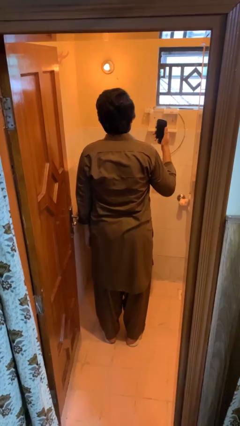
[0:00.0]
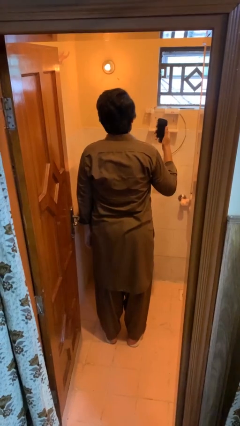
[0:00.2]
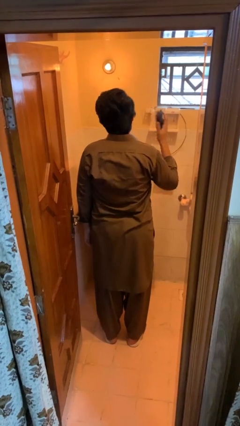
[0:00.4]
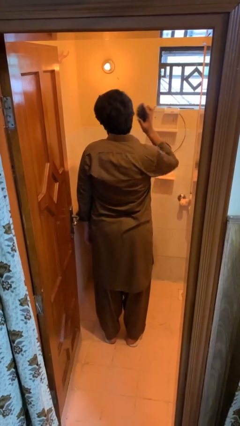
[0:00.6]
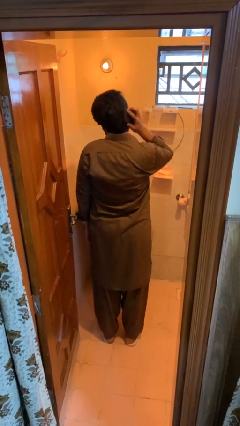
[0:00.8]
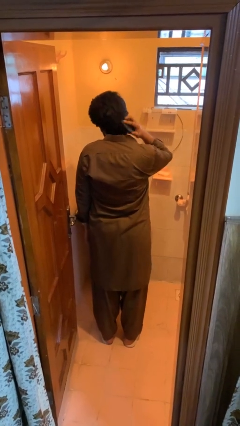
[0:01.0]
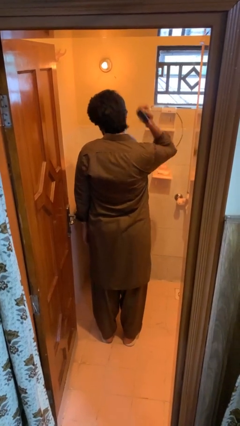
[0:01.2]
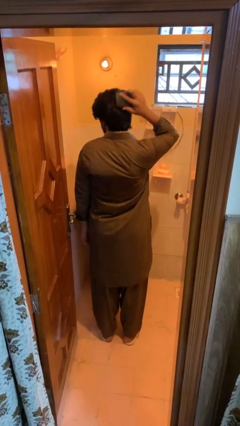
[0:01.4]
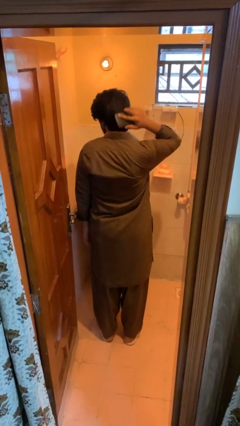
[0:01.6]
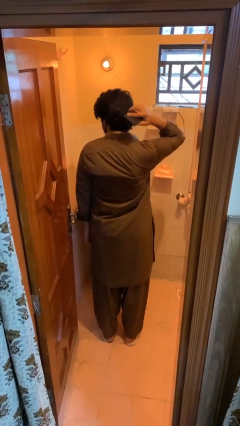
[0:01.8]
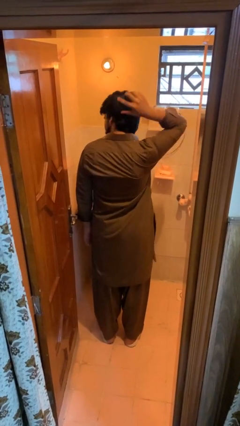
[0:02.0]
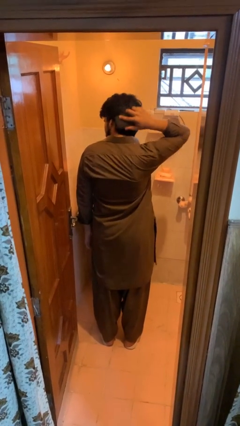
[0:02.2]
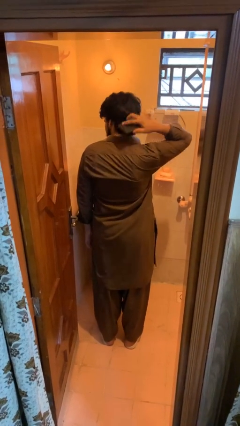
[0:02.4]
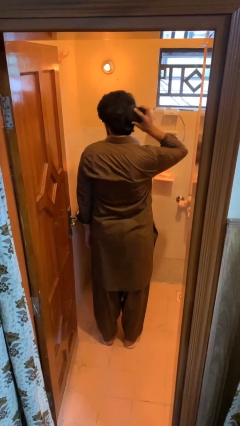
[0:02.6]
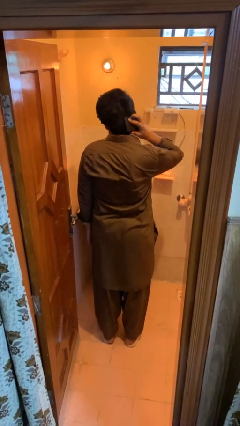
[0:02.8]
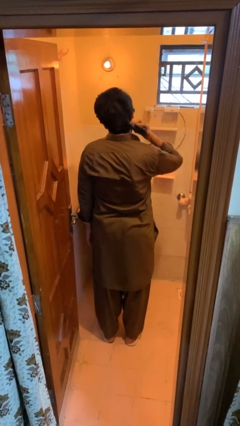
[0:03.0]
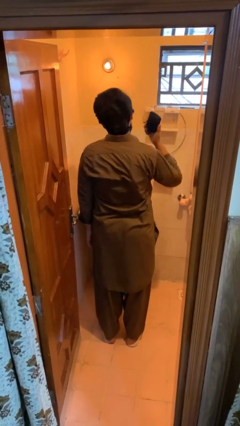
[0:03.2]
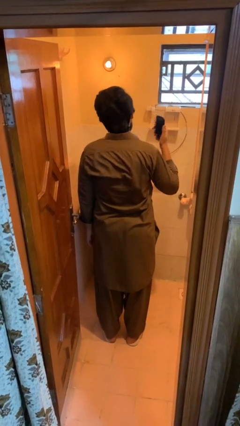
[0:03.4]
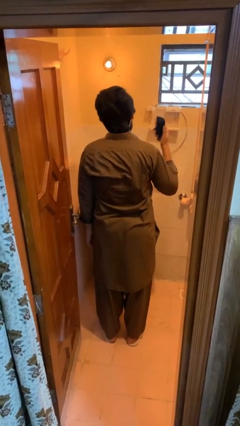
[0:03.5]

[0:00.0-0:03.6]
person brushes hair

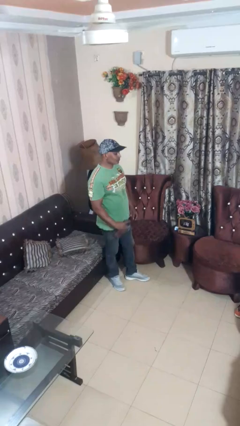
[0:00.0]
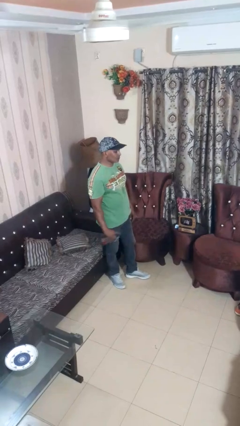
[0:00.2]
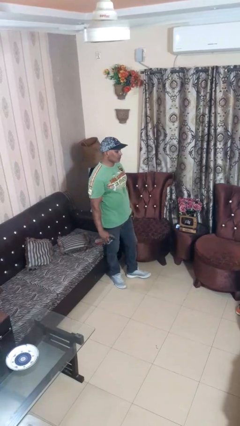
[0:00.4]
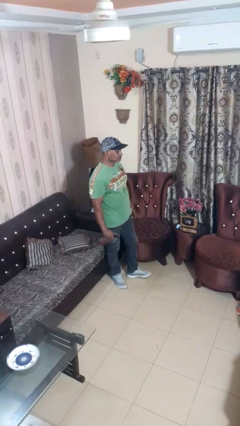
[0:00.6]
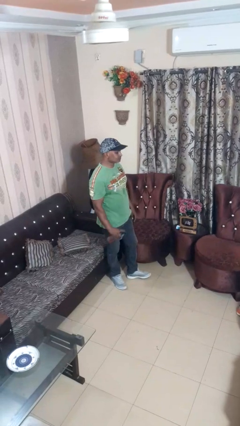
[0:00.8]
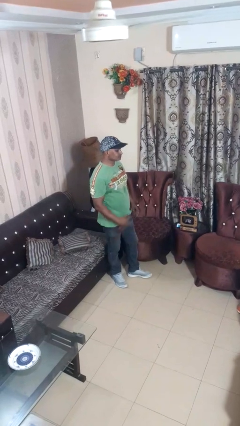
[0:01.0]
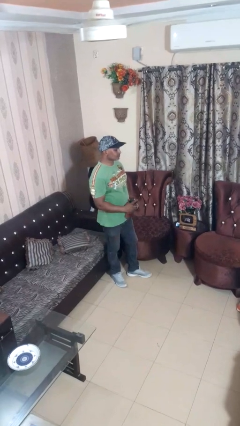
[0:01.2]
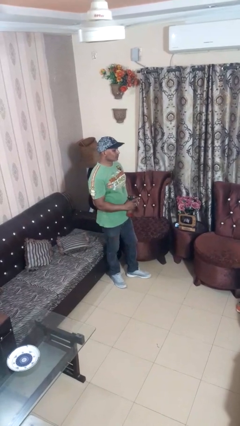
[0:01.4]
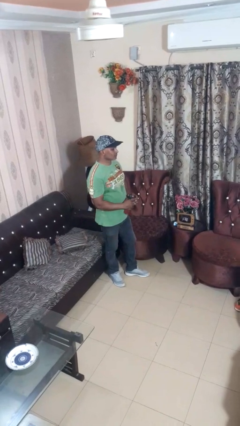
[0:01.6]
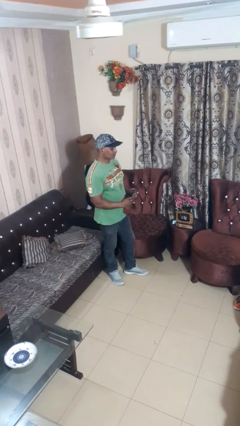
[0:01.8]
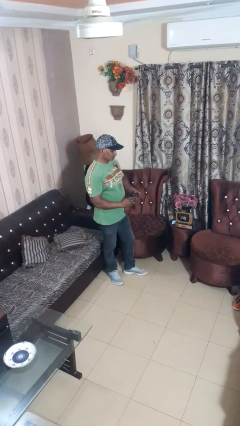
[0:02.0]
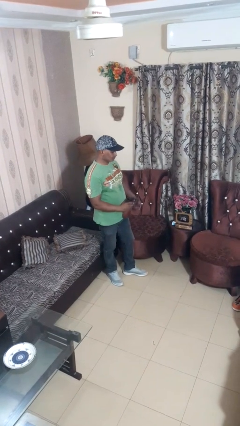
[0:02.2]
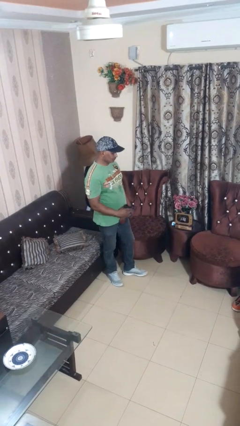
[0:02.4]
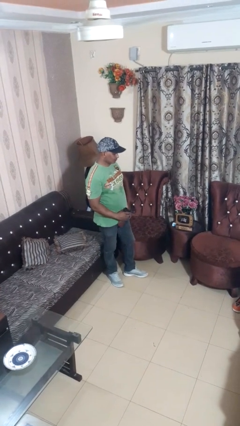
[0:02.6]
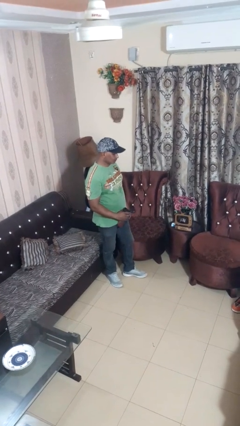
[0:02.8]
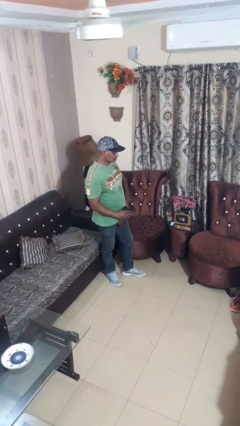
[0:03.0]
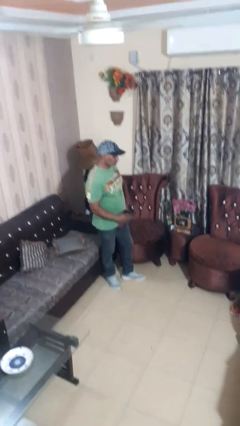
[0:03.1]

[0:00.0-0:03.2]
person opens beverage can

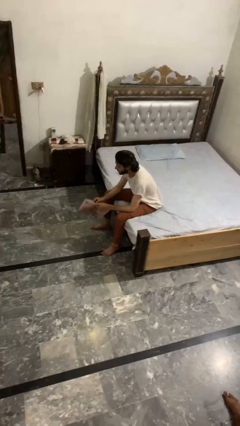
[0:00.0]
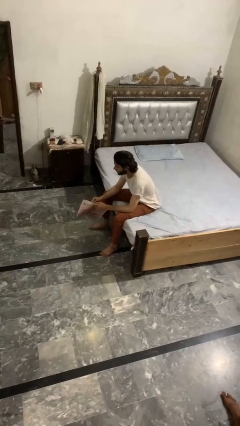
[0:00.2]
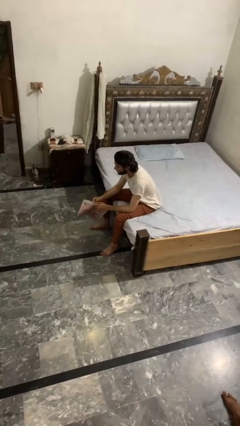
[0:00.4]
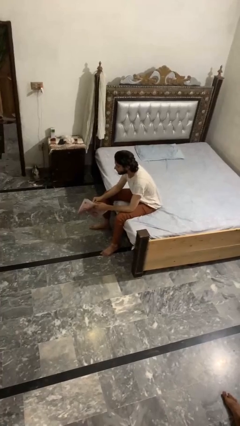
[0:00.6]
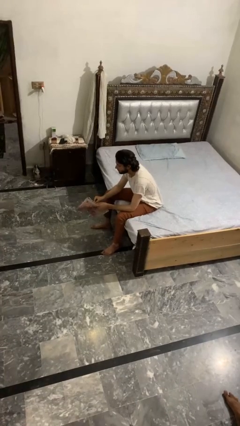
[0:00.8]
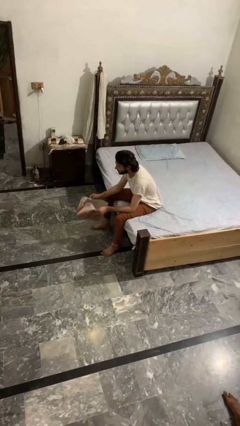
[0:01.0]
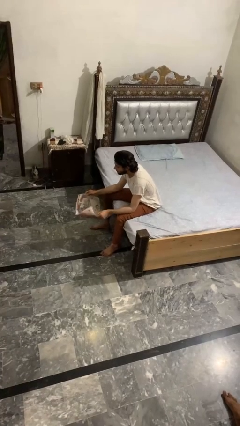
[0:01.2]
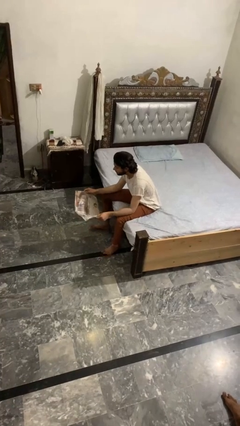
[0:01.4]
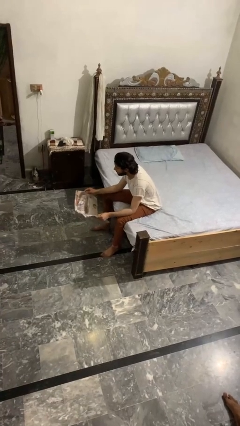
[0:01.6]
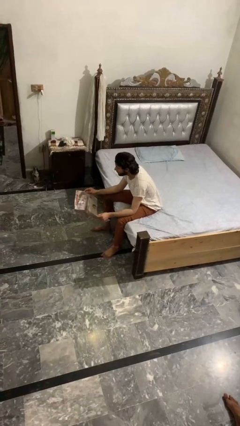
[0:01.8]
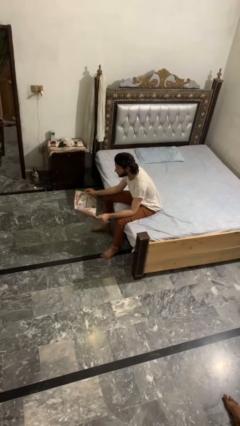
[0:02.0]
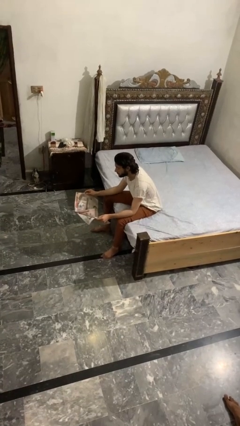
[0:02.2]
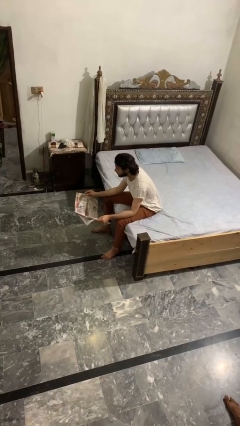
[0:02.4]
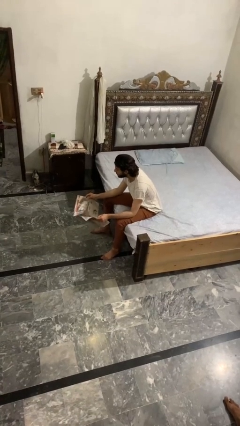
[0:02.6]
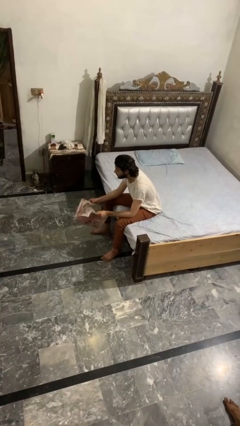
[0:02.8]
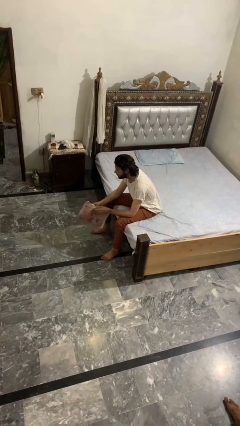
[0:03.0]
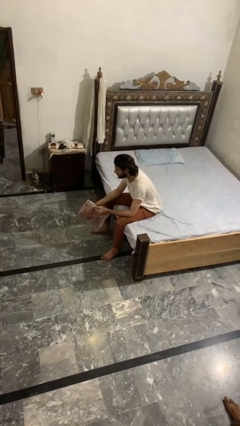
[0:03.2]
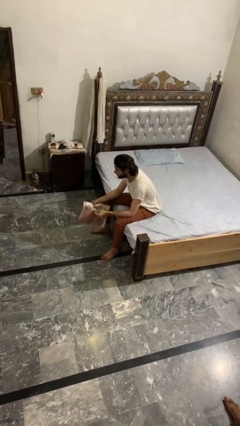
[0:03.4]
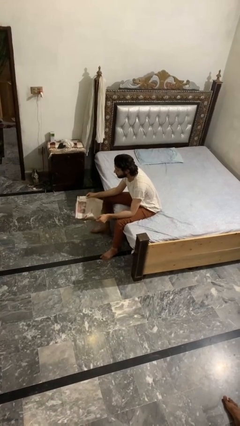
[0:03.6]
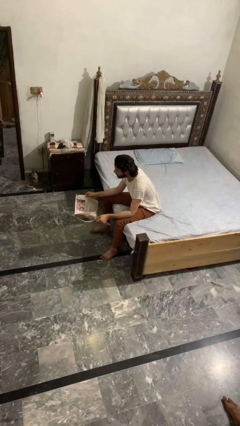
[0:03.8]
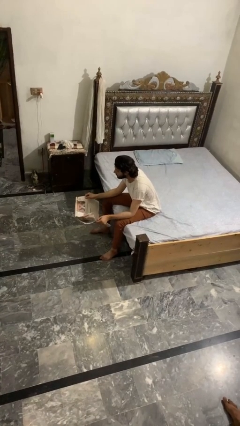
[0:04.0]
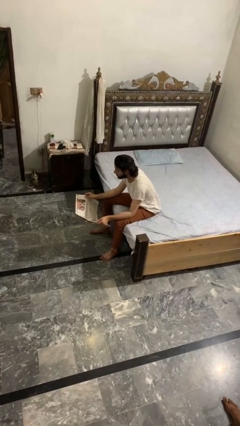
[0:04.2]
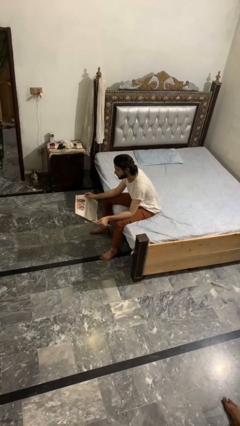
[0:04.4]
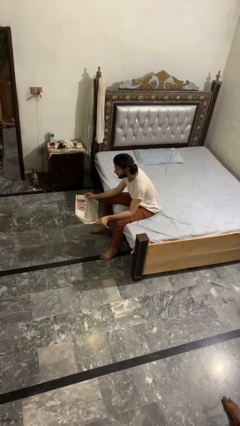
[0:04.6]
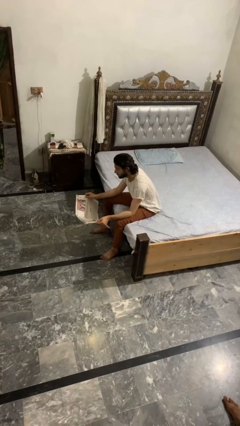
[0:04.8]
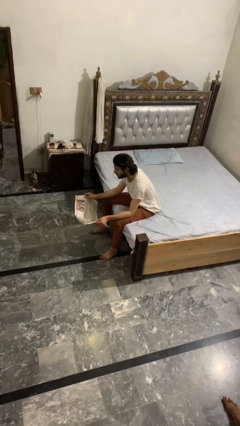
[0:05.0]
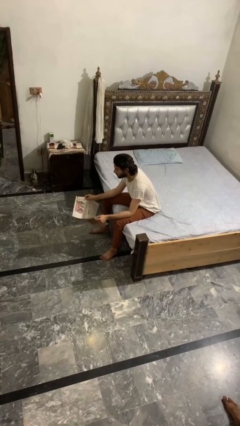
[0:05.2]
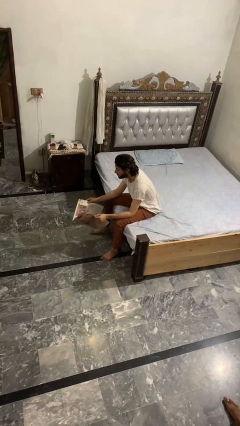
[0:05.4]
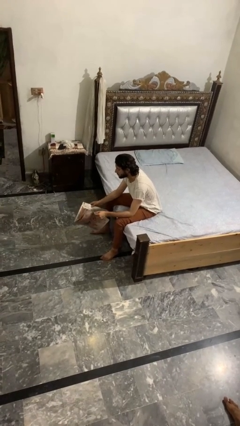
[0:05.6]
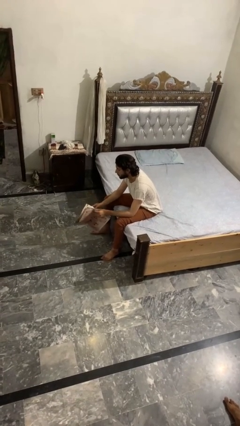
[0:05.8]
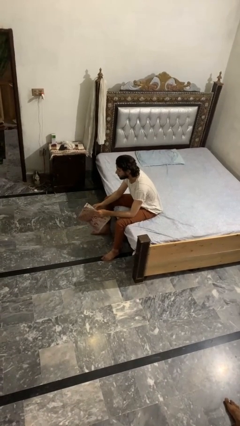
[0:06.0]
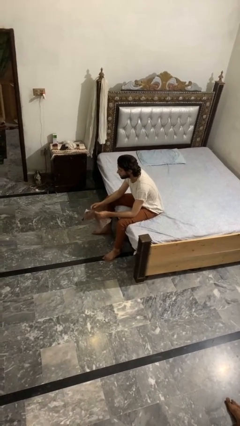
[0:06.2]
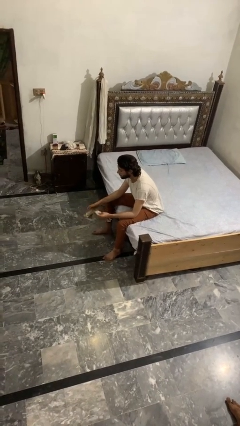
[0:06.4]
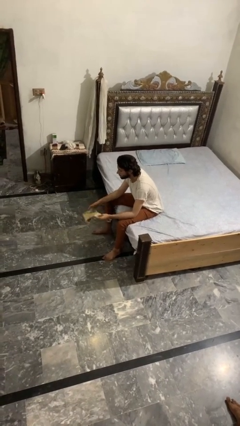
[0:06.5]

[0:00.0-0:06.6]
person reads magazine

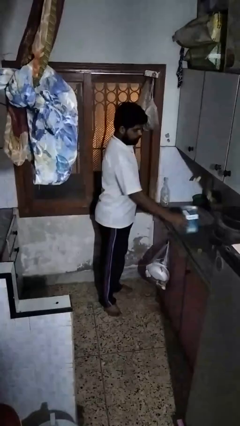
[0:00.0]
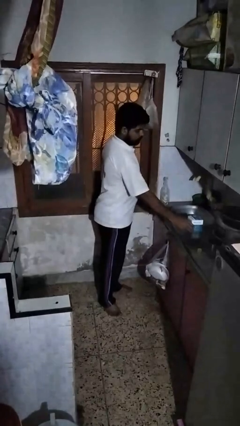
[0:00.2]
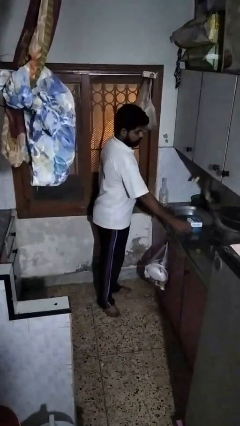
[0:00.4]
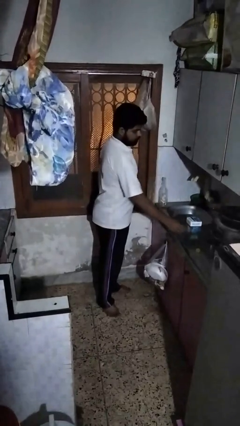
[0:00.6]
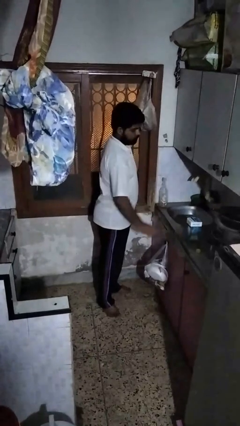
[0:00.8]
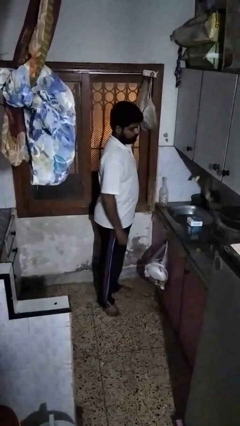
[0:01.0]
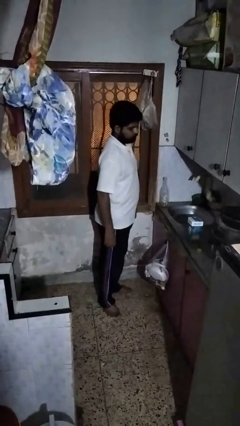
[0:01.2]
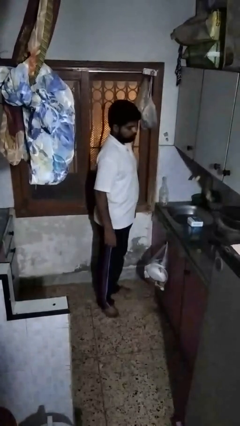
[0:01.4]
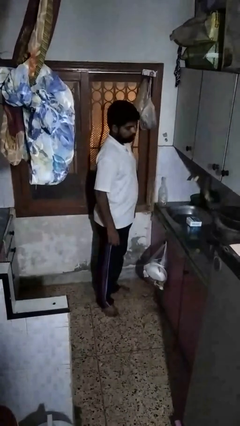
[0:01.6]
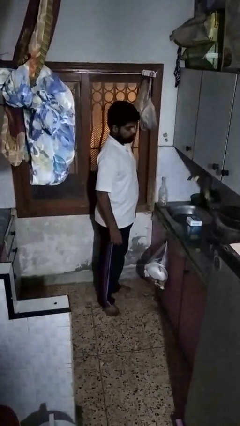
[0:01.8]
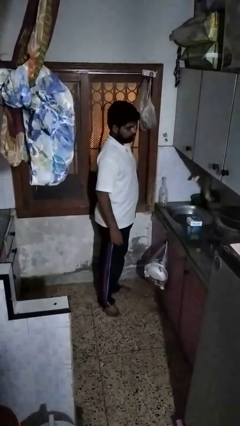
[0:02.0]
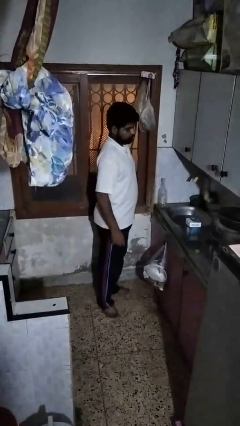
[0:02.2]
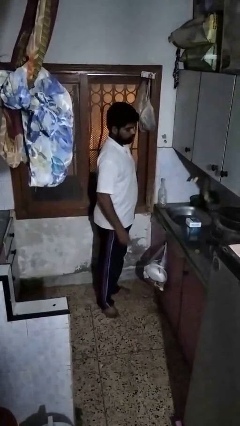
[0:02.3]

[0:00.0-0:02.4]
person puts down object on countertop

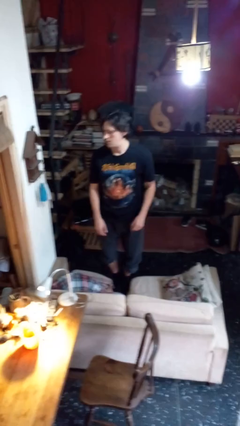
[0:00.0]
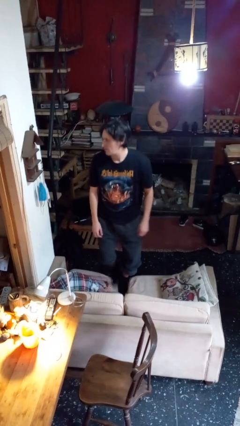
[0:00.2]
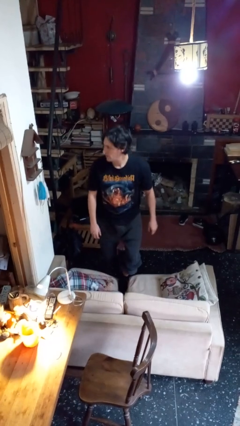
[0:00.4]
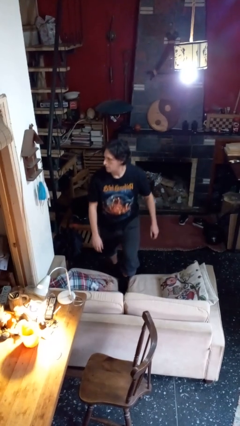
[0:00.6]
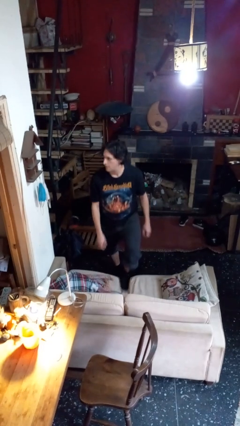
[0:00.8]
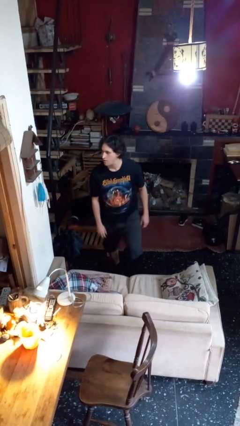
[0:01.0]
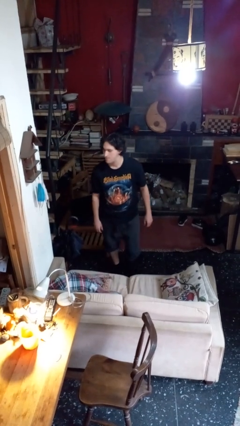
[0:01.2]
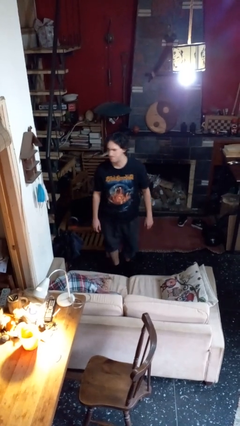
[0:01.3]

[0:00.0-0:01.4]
person climbs off couch

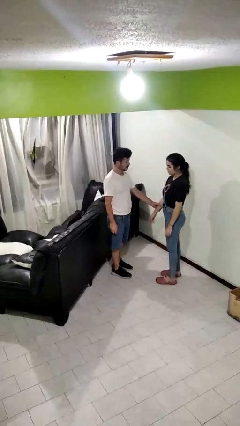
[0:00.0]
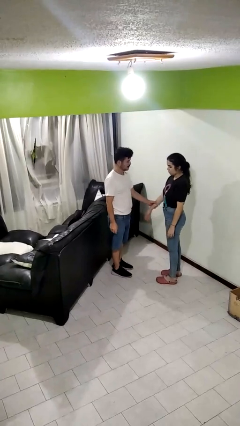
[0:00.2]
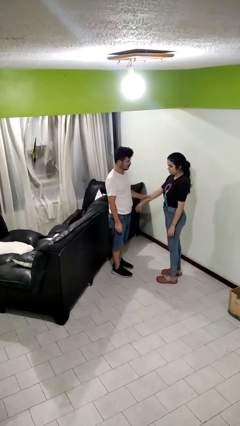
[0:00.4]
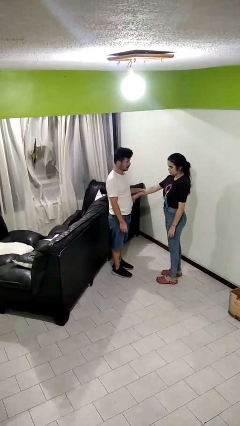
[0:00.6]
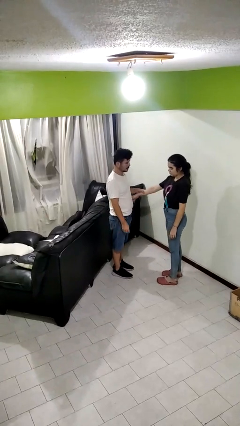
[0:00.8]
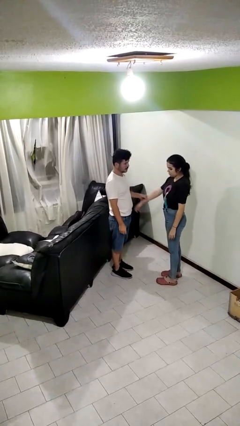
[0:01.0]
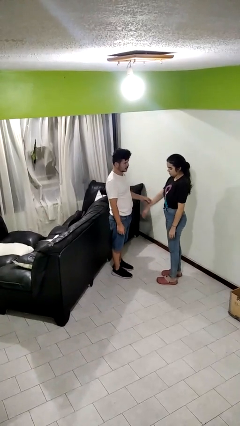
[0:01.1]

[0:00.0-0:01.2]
person grabs person by forearm
